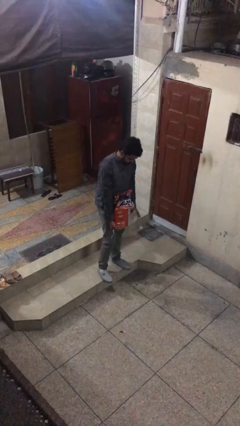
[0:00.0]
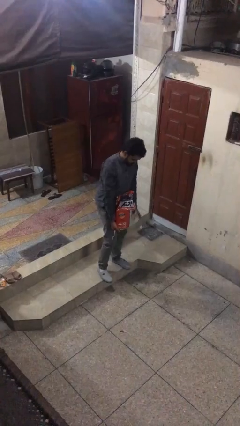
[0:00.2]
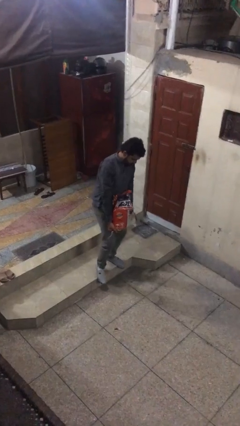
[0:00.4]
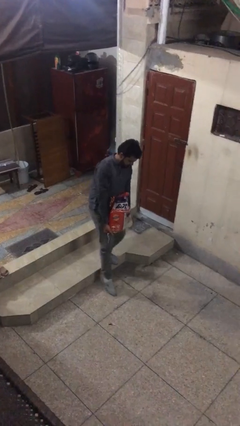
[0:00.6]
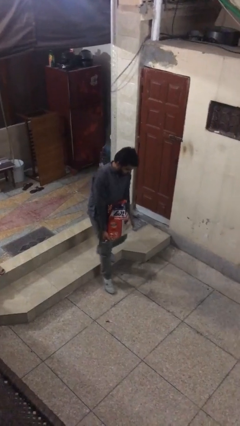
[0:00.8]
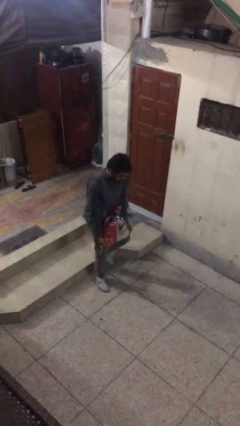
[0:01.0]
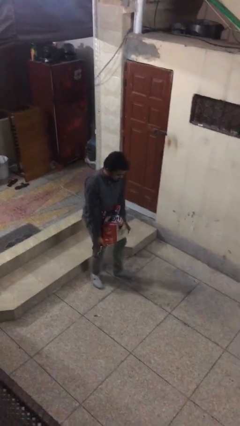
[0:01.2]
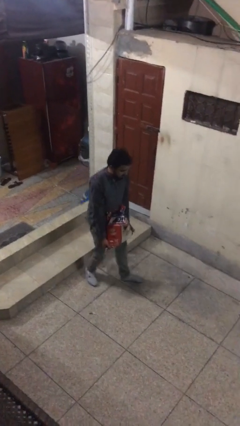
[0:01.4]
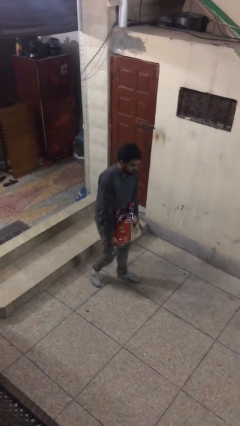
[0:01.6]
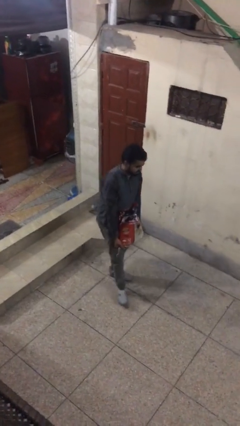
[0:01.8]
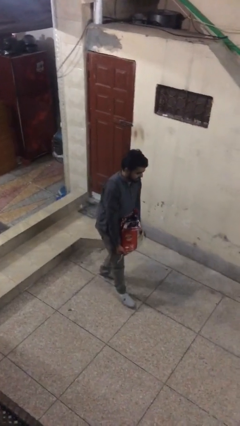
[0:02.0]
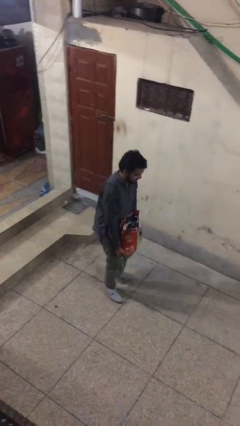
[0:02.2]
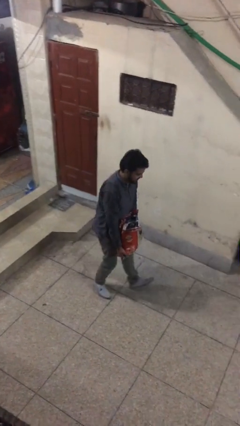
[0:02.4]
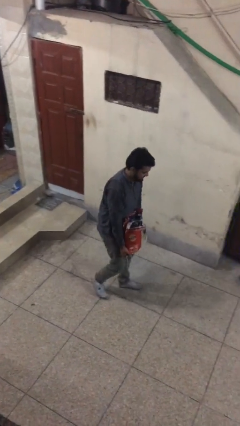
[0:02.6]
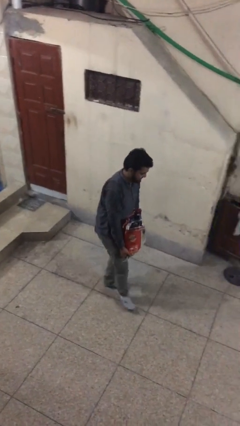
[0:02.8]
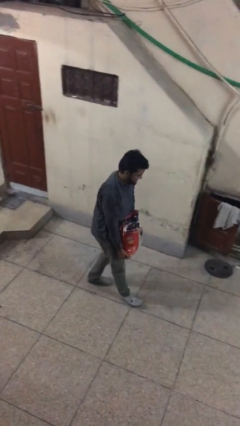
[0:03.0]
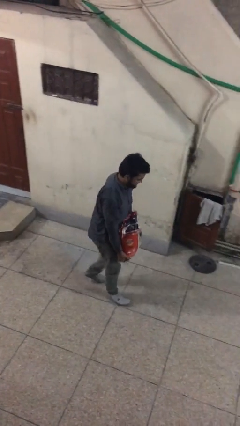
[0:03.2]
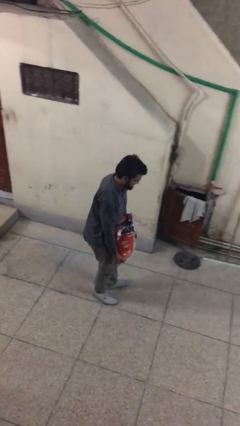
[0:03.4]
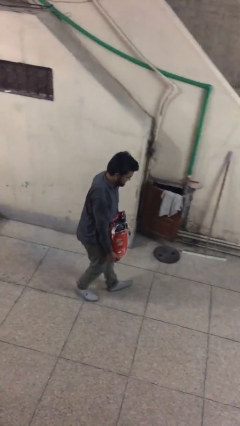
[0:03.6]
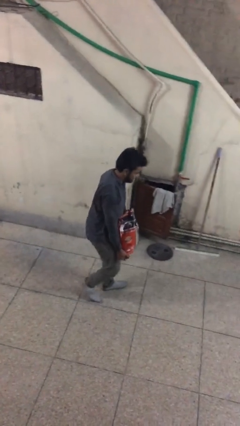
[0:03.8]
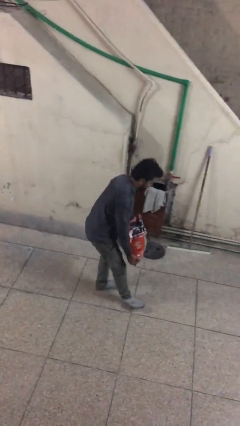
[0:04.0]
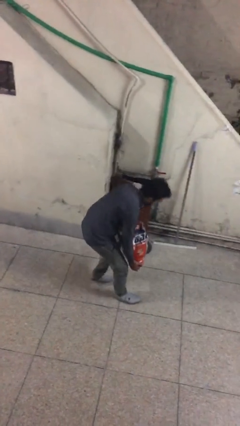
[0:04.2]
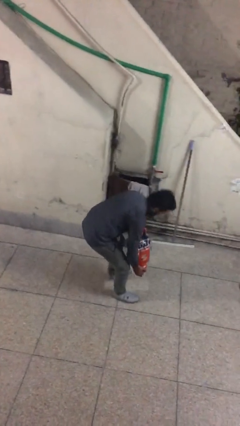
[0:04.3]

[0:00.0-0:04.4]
person carries heavy object

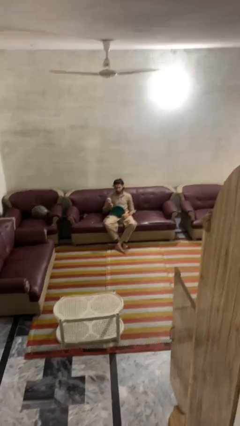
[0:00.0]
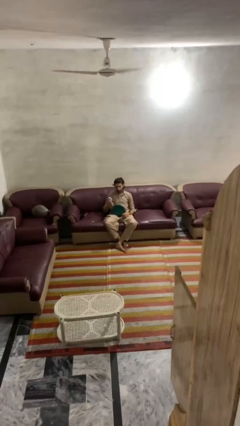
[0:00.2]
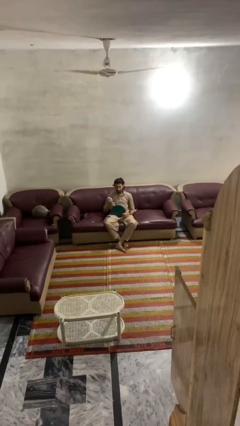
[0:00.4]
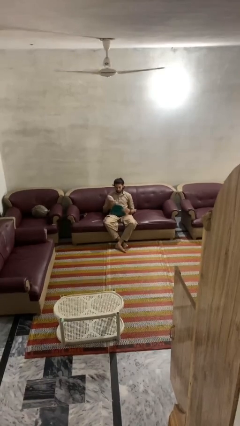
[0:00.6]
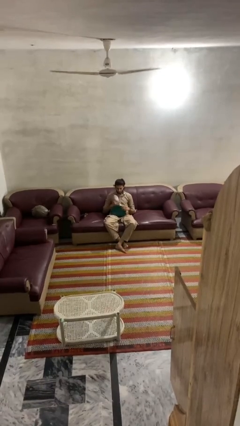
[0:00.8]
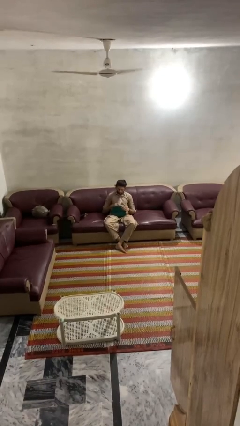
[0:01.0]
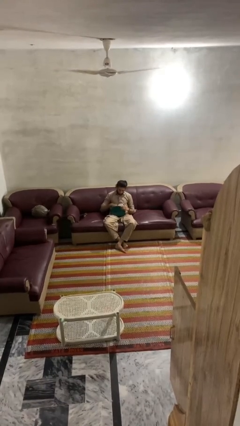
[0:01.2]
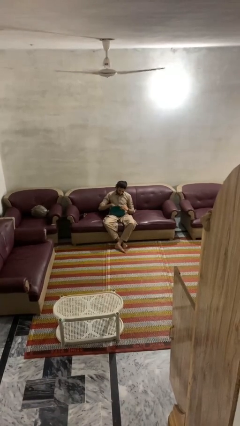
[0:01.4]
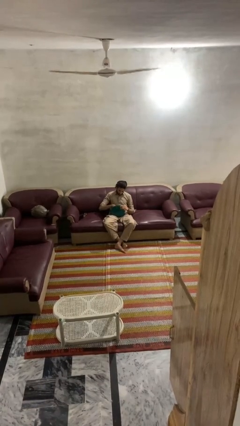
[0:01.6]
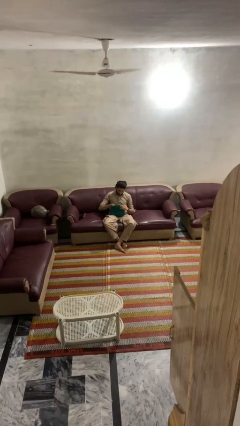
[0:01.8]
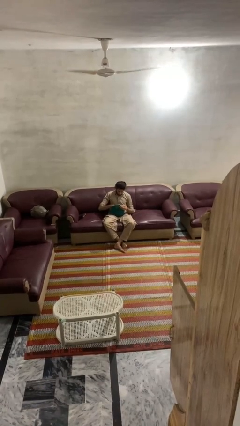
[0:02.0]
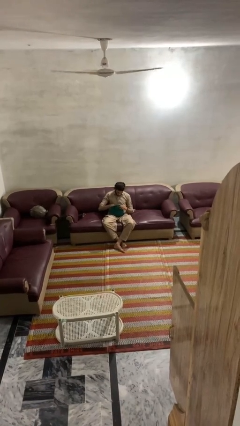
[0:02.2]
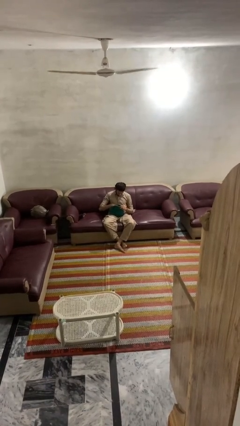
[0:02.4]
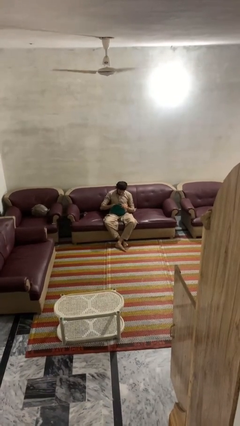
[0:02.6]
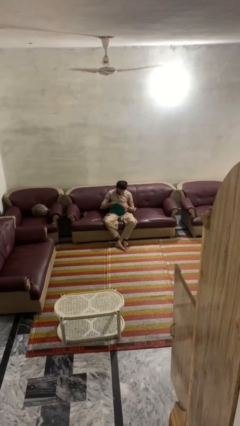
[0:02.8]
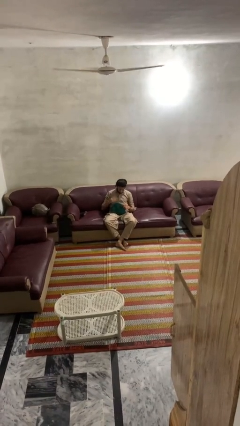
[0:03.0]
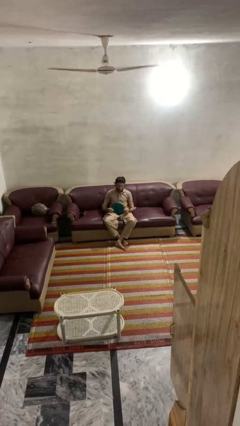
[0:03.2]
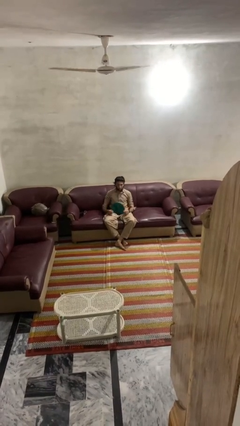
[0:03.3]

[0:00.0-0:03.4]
person puts object into purse

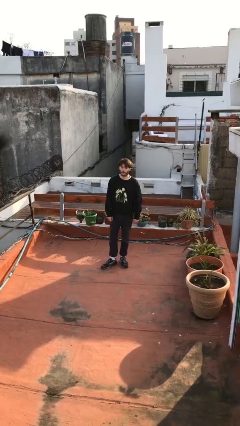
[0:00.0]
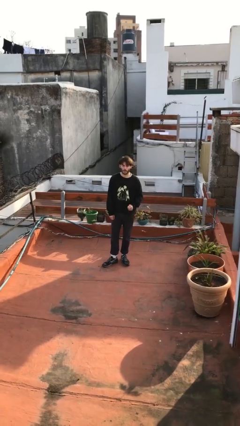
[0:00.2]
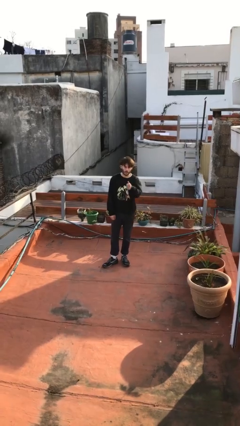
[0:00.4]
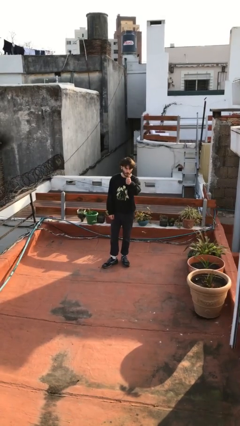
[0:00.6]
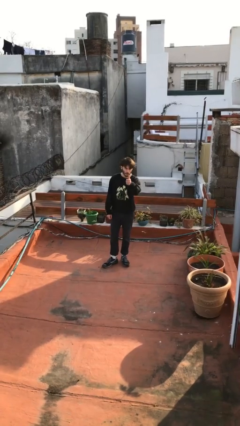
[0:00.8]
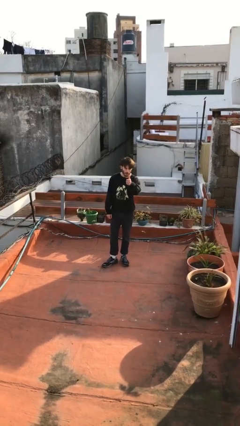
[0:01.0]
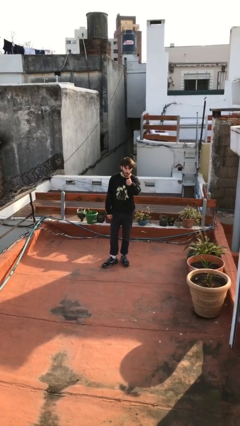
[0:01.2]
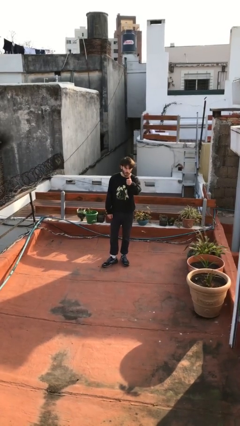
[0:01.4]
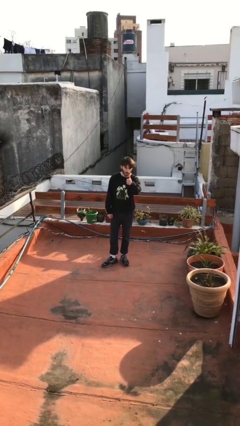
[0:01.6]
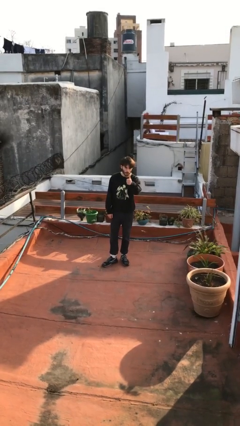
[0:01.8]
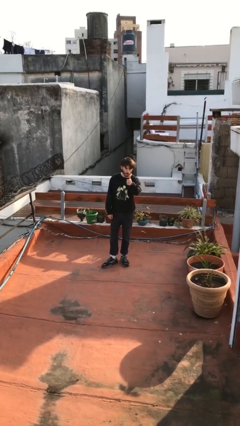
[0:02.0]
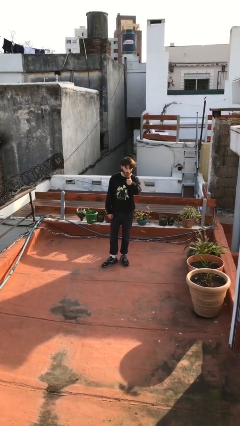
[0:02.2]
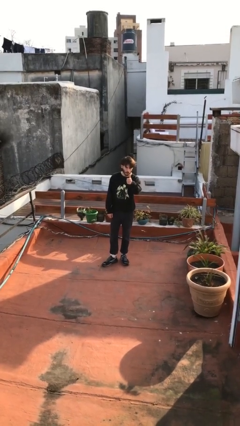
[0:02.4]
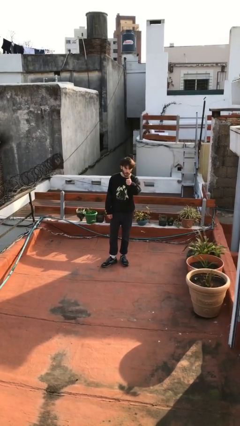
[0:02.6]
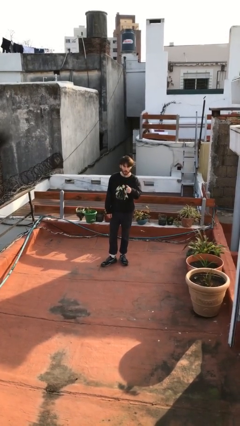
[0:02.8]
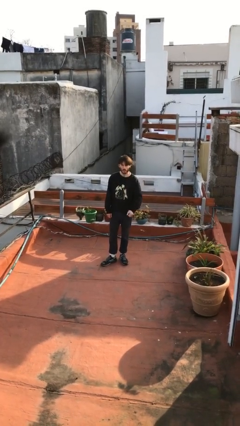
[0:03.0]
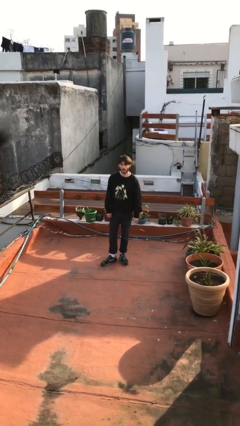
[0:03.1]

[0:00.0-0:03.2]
person gestures thumbs up

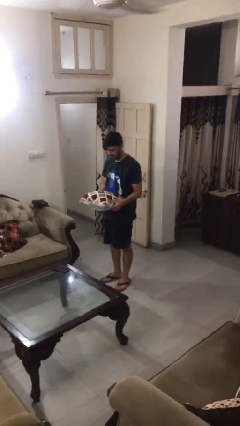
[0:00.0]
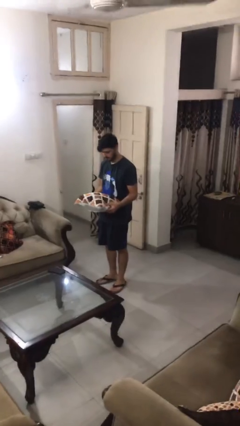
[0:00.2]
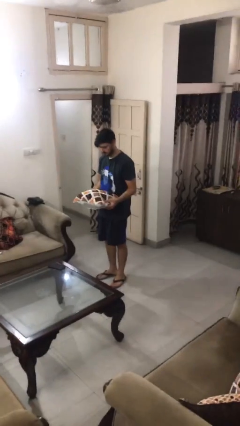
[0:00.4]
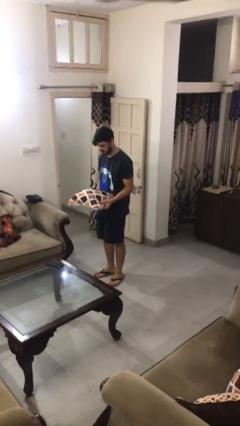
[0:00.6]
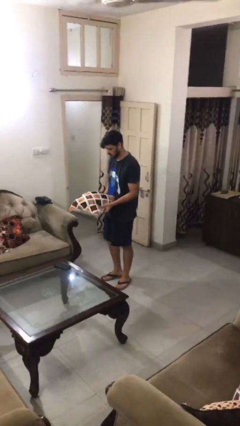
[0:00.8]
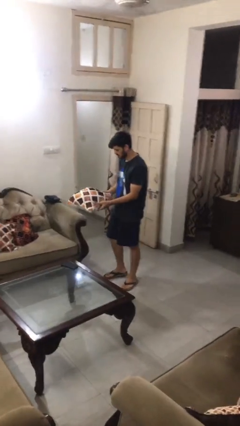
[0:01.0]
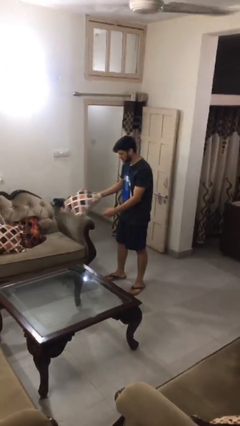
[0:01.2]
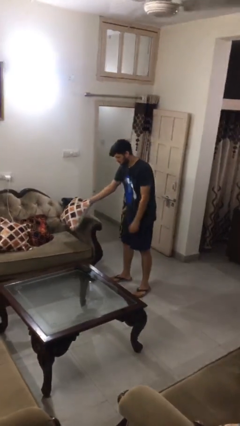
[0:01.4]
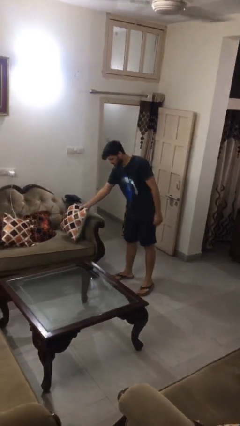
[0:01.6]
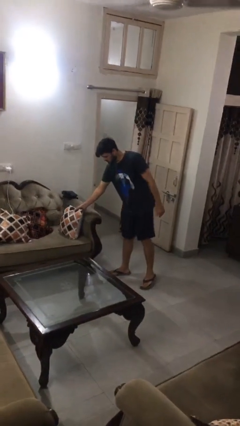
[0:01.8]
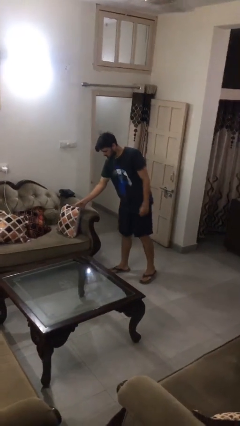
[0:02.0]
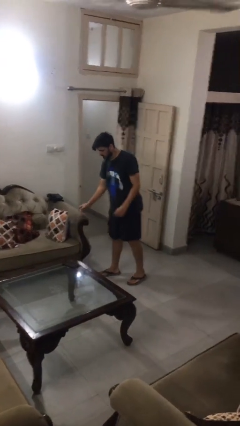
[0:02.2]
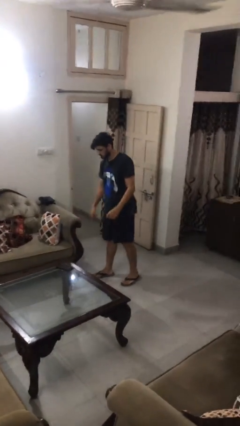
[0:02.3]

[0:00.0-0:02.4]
person puts down object on couch

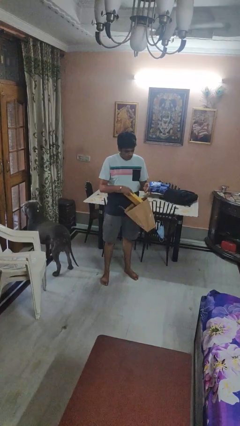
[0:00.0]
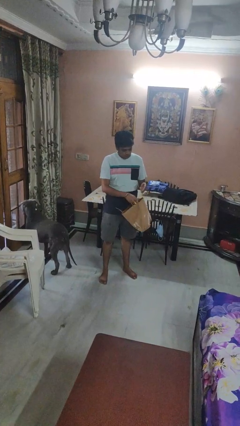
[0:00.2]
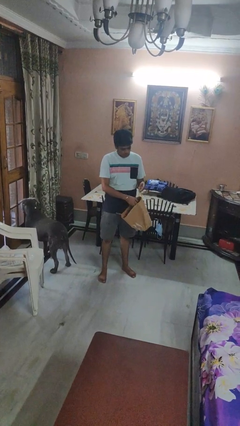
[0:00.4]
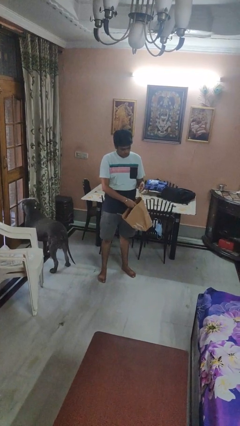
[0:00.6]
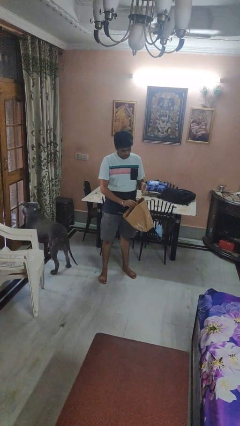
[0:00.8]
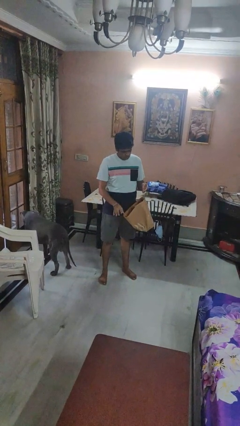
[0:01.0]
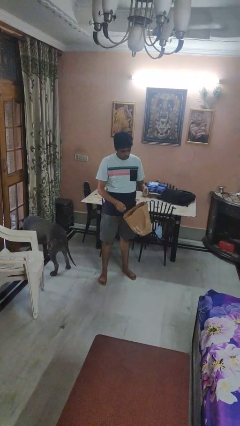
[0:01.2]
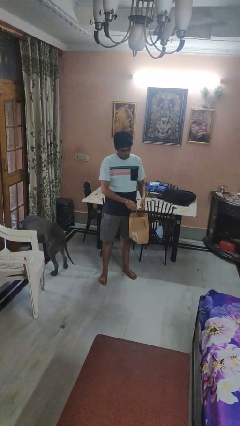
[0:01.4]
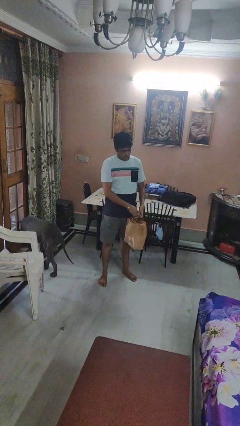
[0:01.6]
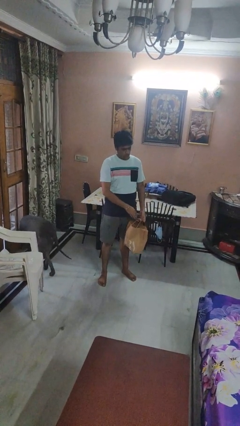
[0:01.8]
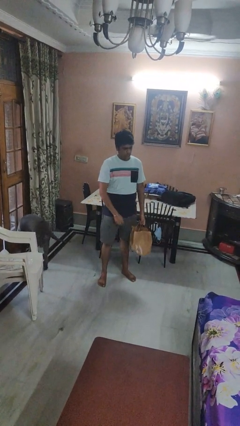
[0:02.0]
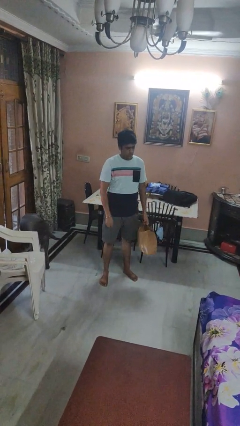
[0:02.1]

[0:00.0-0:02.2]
person puts object into bag

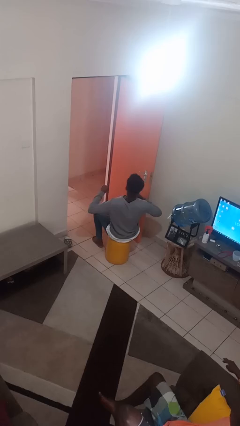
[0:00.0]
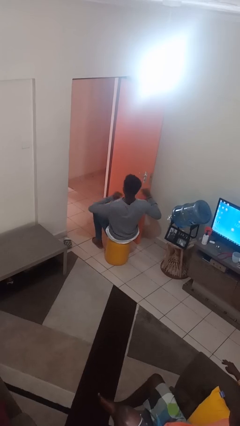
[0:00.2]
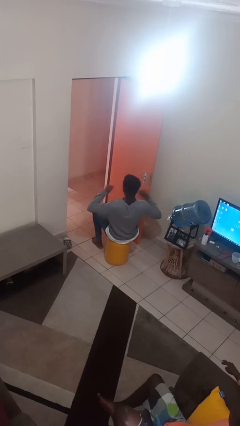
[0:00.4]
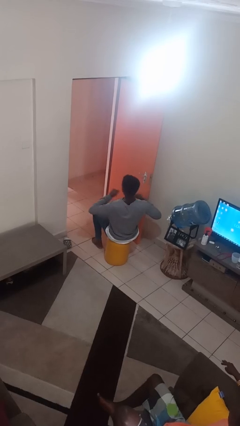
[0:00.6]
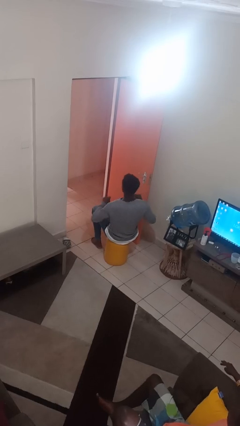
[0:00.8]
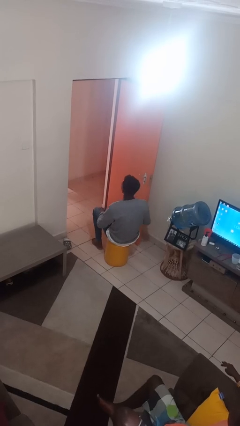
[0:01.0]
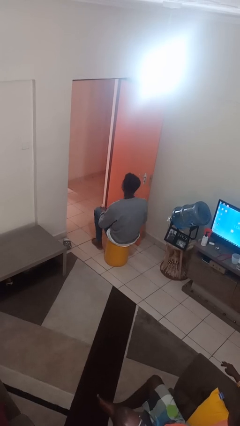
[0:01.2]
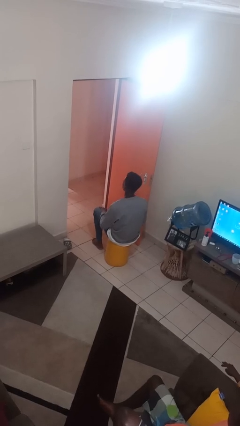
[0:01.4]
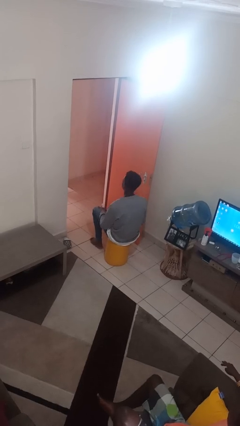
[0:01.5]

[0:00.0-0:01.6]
person drums on chest
